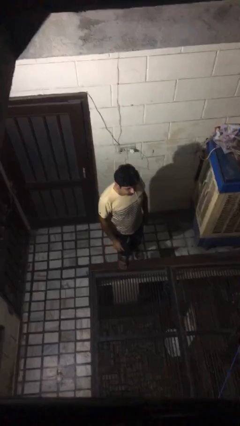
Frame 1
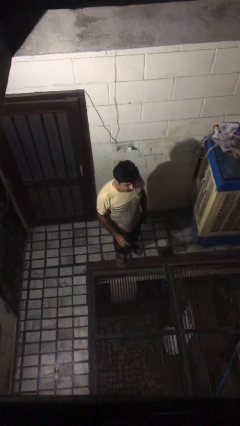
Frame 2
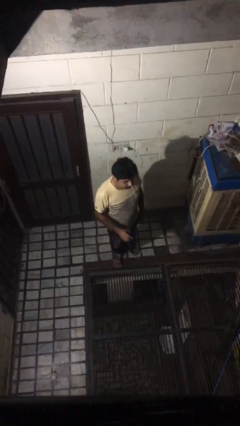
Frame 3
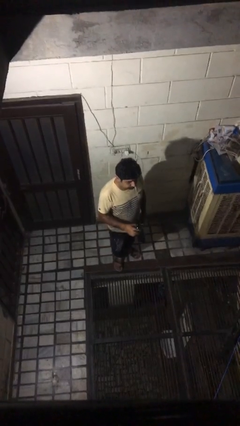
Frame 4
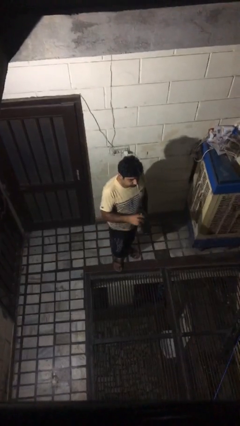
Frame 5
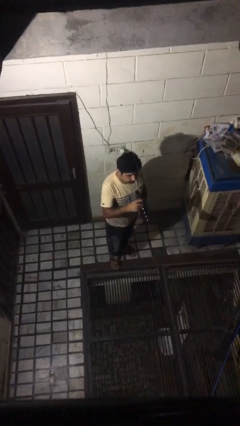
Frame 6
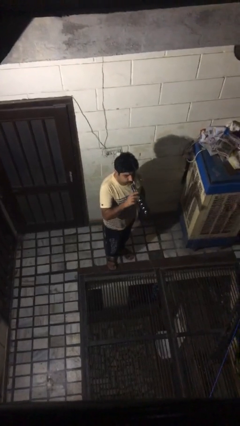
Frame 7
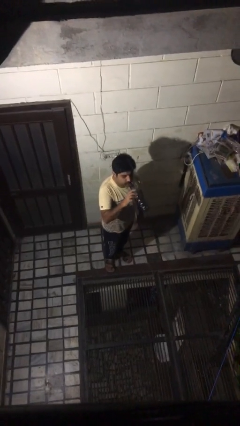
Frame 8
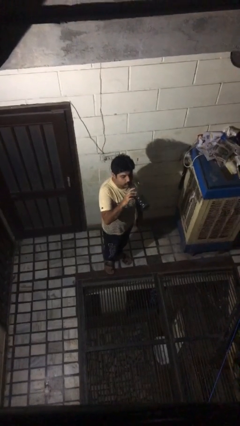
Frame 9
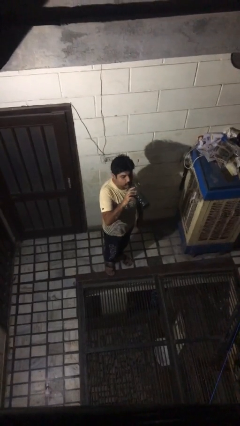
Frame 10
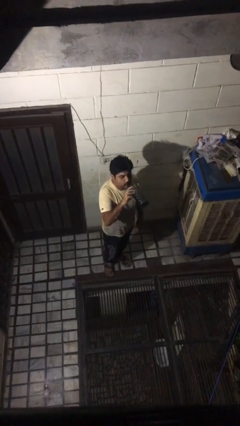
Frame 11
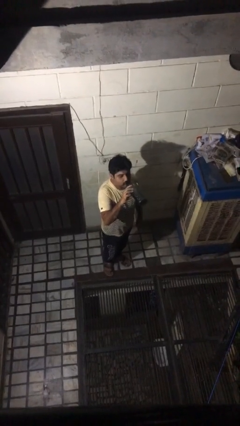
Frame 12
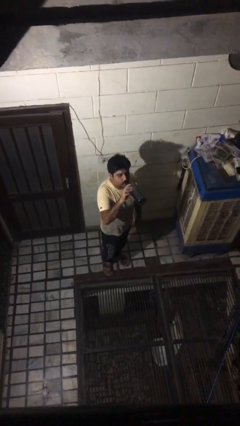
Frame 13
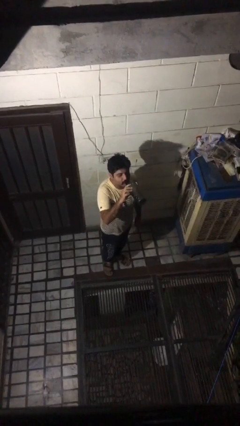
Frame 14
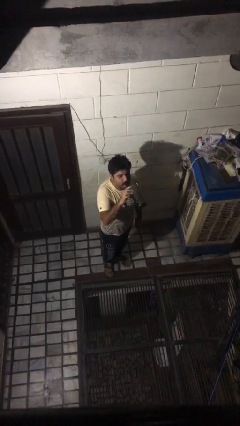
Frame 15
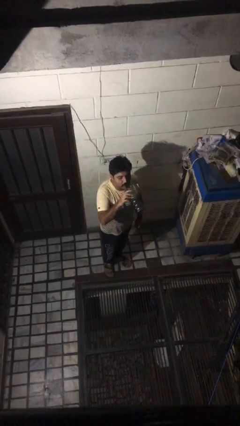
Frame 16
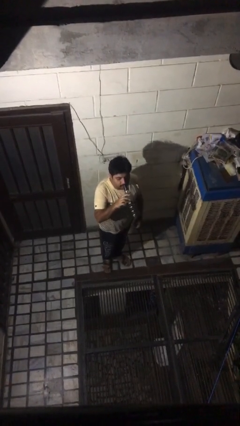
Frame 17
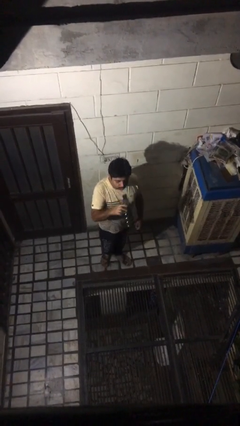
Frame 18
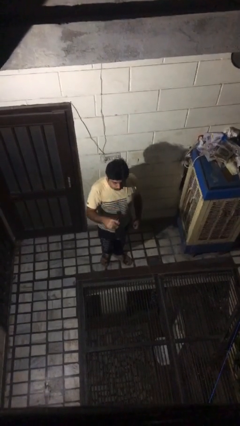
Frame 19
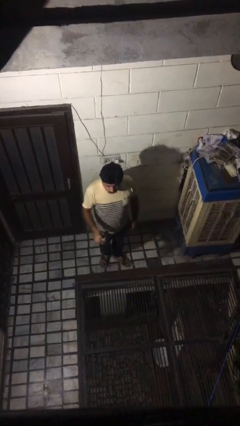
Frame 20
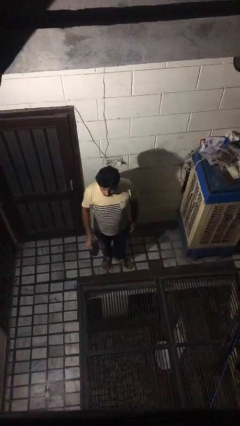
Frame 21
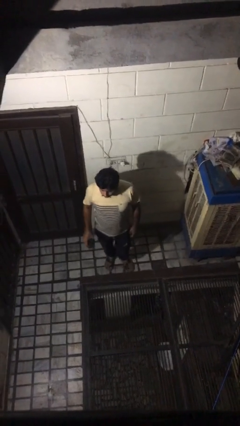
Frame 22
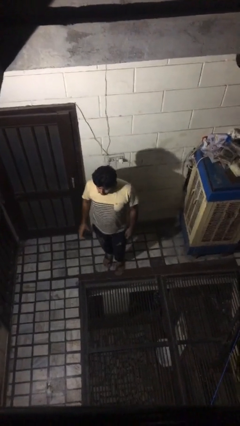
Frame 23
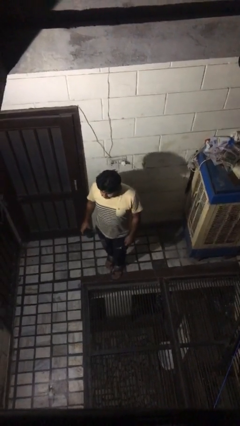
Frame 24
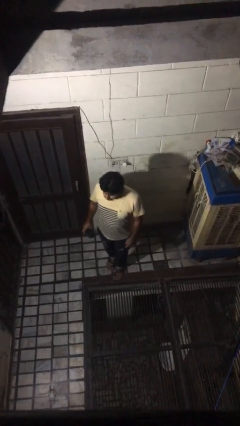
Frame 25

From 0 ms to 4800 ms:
person drinks from bottle

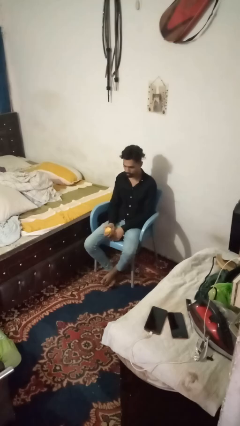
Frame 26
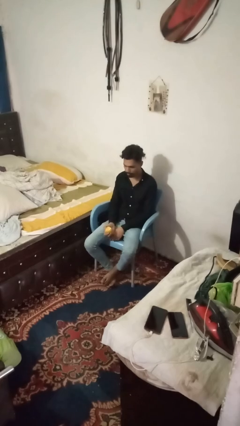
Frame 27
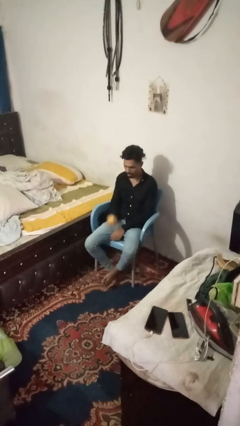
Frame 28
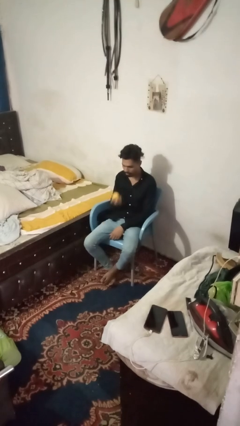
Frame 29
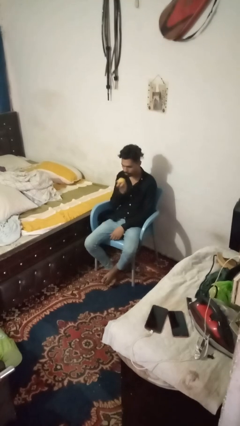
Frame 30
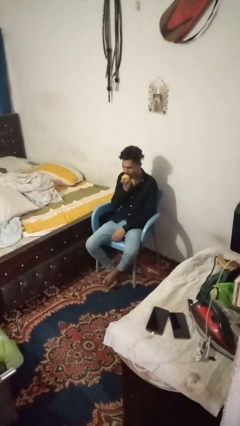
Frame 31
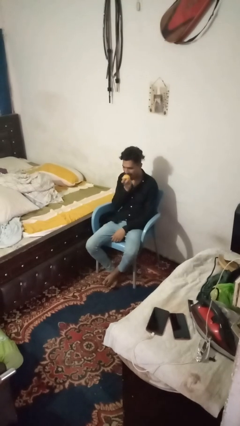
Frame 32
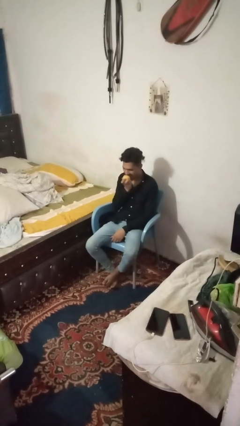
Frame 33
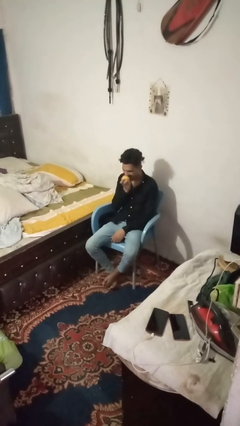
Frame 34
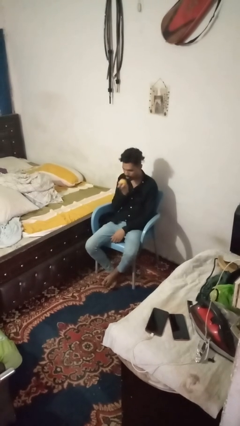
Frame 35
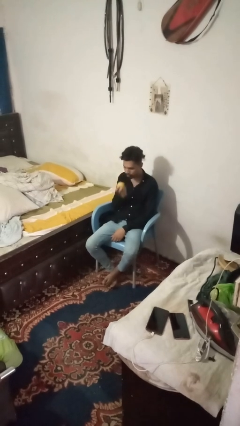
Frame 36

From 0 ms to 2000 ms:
person eats apple

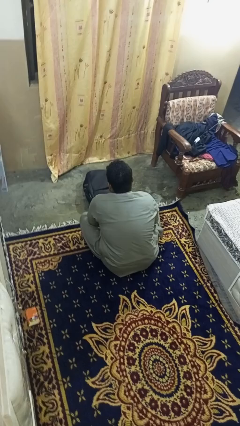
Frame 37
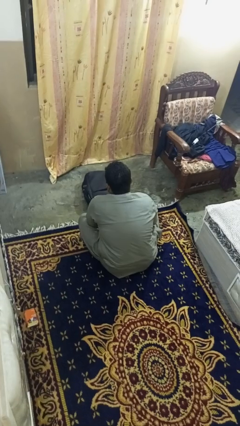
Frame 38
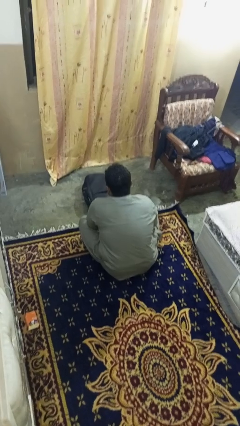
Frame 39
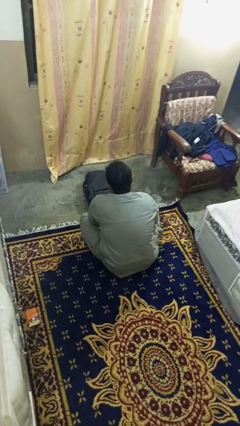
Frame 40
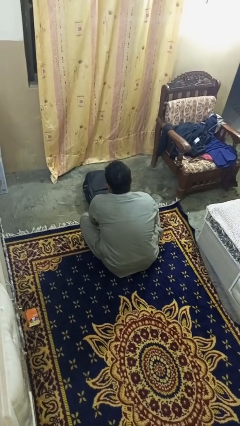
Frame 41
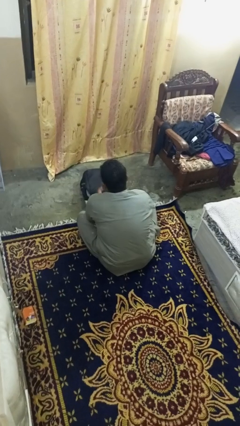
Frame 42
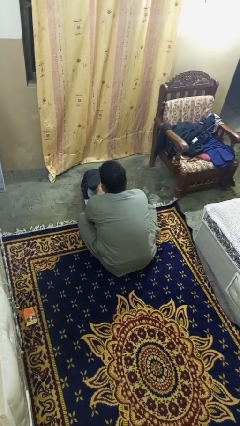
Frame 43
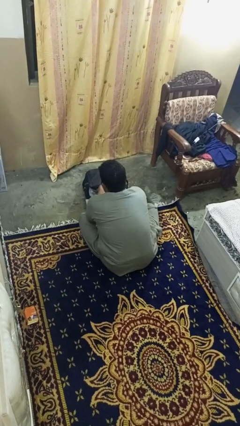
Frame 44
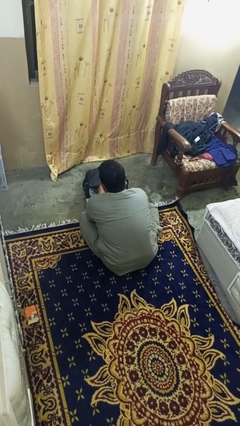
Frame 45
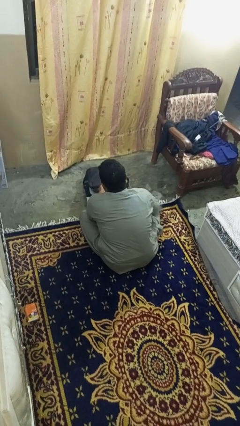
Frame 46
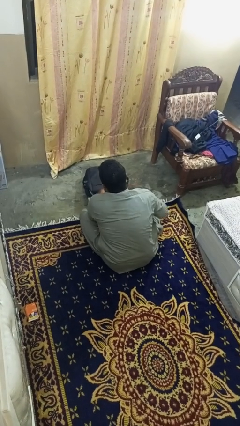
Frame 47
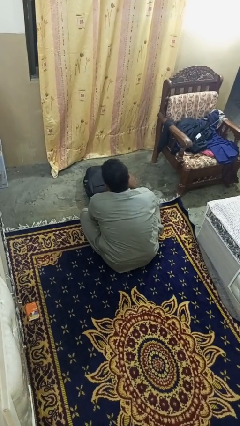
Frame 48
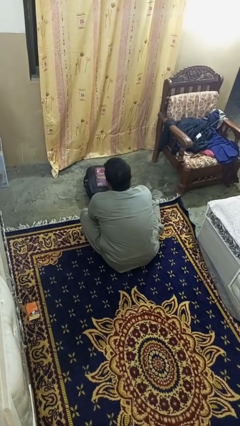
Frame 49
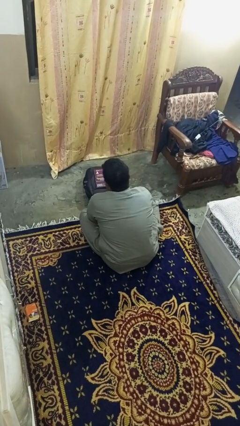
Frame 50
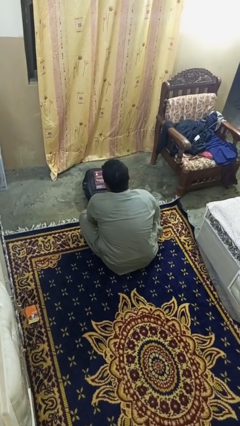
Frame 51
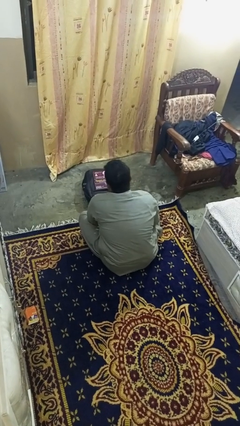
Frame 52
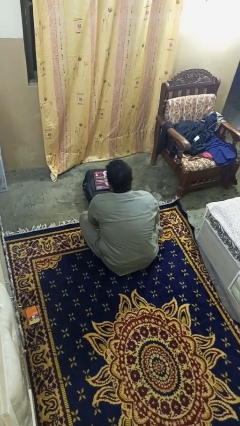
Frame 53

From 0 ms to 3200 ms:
person takes object from bag

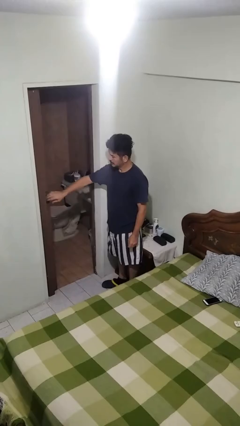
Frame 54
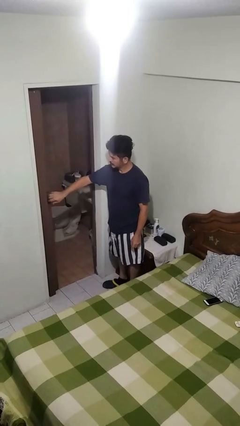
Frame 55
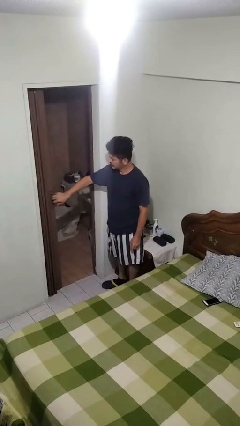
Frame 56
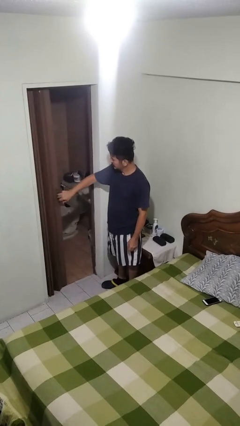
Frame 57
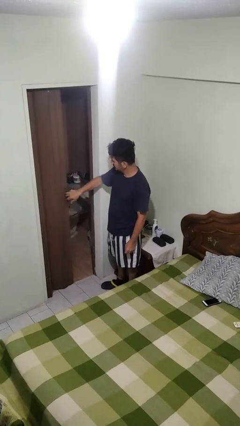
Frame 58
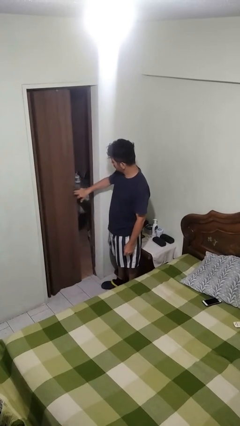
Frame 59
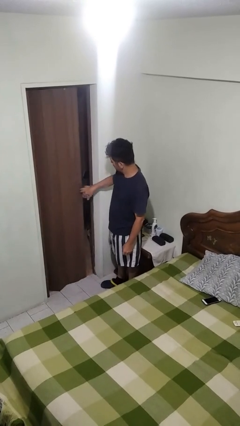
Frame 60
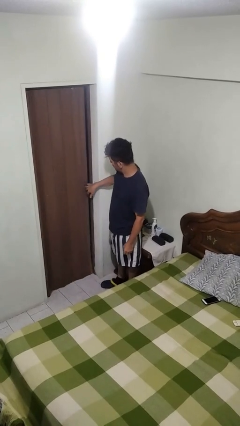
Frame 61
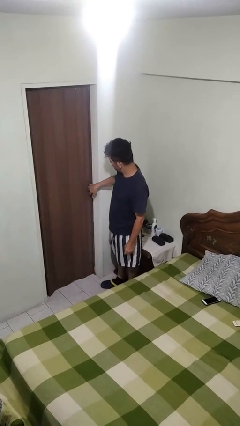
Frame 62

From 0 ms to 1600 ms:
person closes sliding door

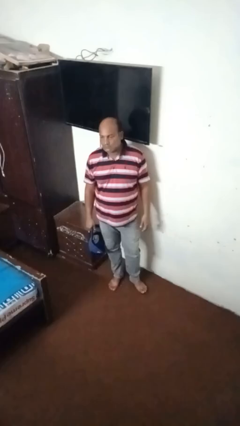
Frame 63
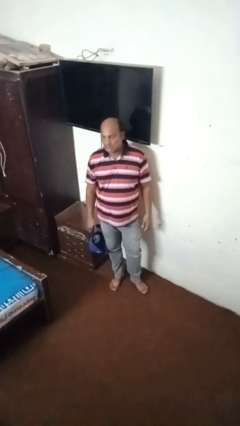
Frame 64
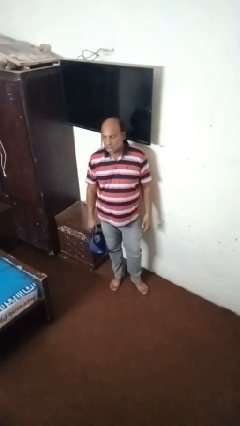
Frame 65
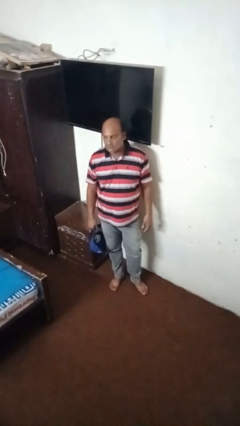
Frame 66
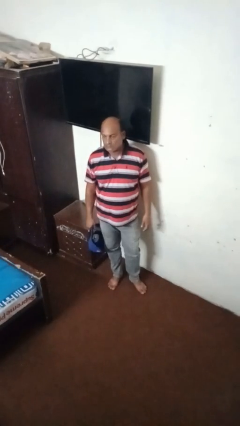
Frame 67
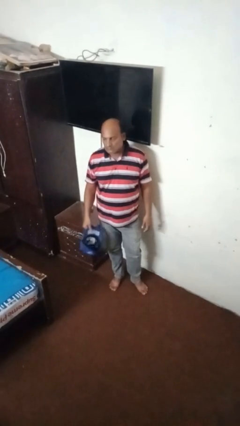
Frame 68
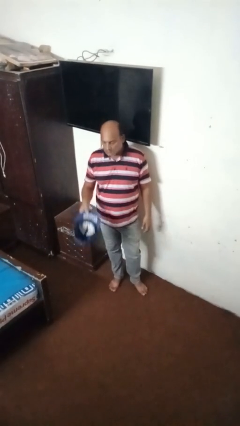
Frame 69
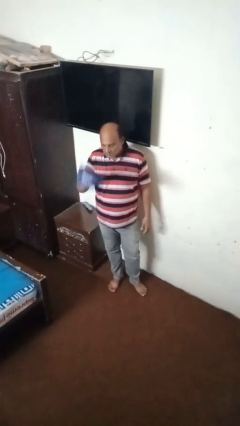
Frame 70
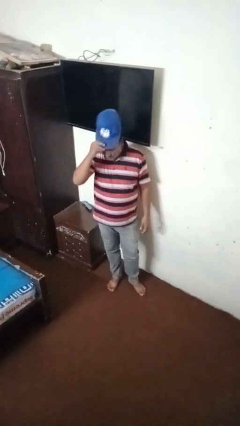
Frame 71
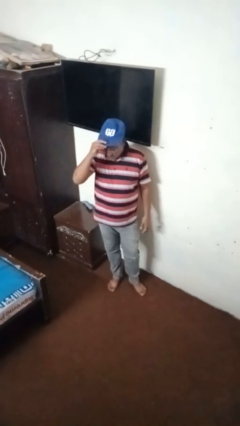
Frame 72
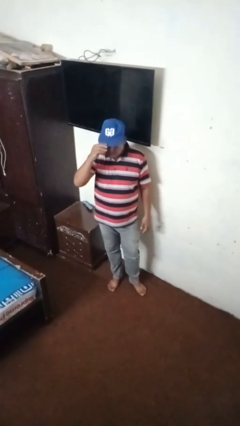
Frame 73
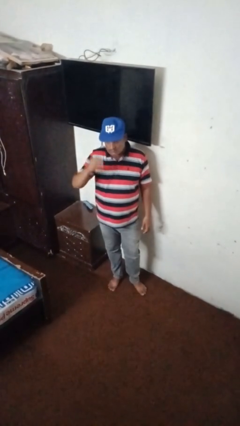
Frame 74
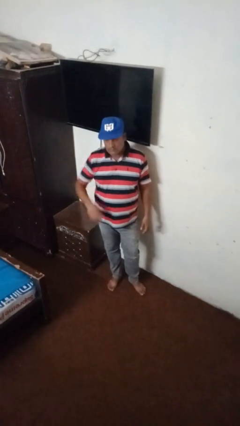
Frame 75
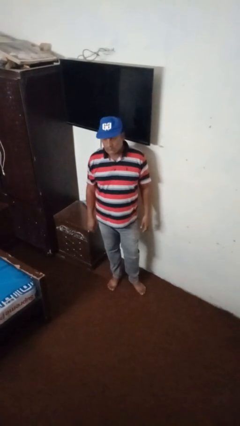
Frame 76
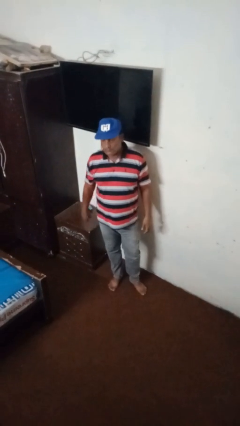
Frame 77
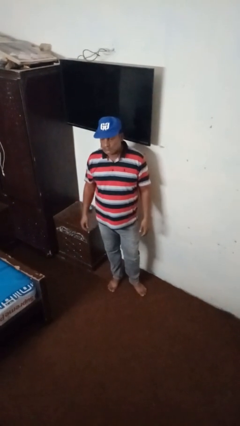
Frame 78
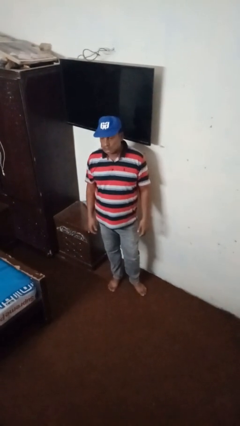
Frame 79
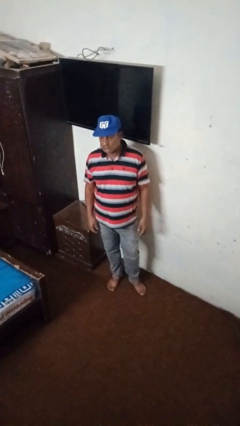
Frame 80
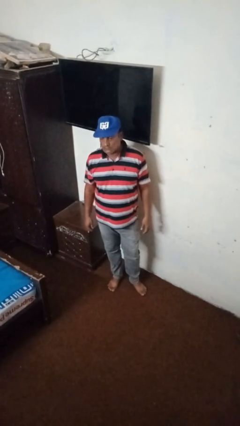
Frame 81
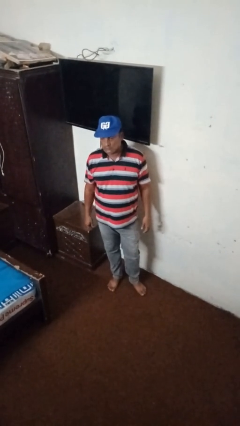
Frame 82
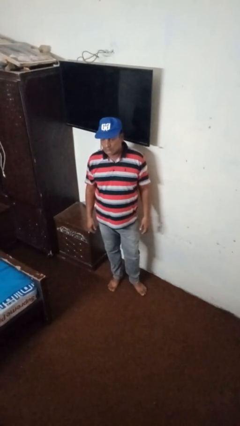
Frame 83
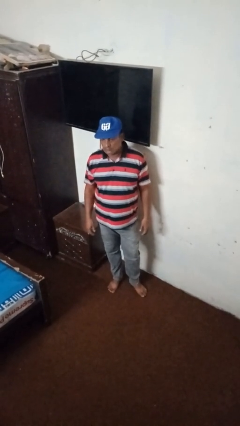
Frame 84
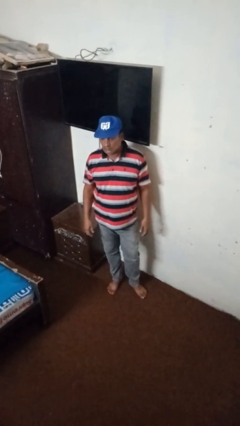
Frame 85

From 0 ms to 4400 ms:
person puts on hat

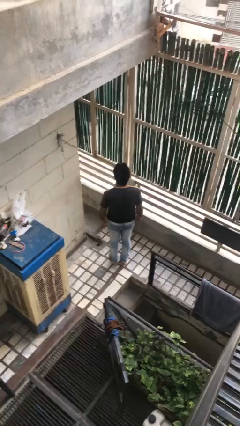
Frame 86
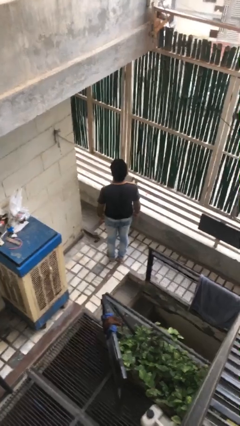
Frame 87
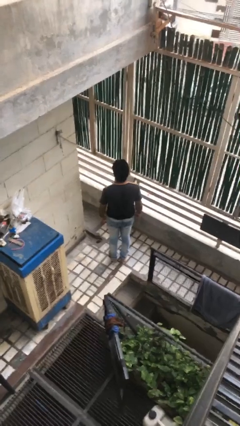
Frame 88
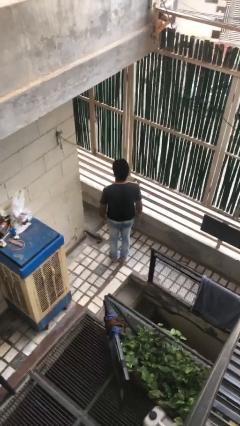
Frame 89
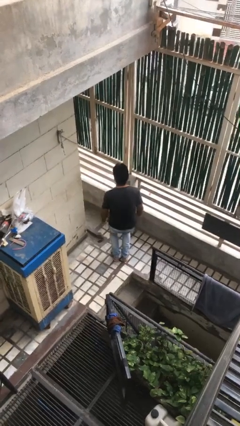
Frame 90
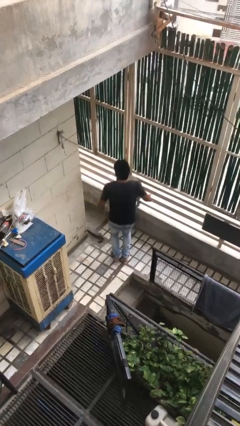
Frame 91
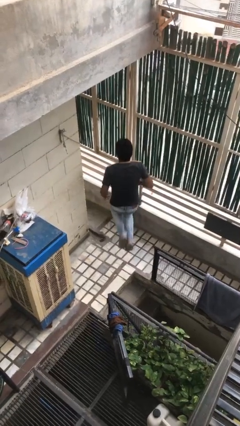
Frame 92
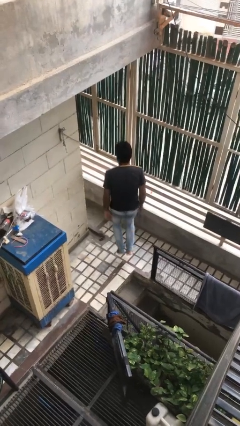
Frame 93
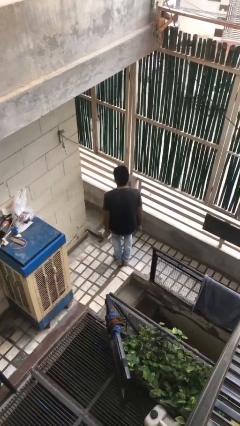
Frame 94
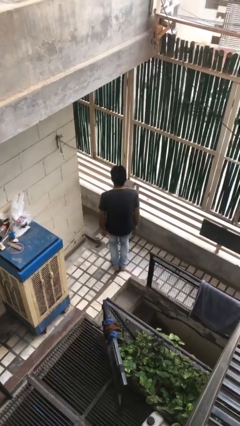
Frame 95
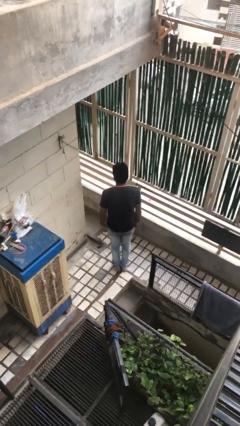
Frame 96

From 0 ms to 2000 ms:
person jumps
